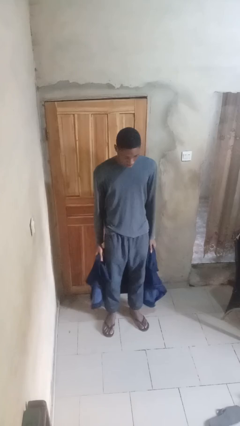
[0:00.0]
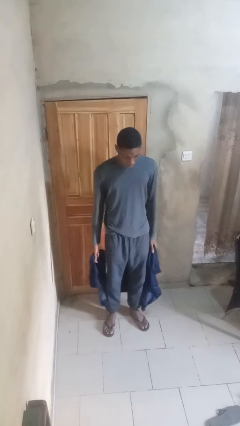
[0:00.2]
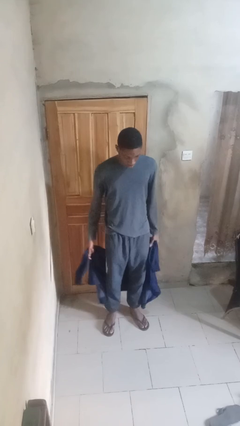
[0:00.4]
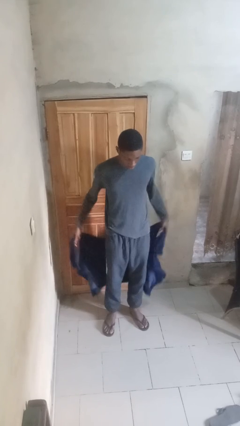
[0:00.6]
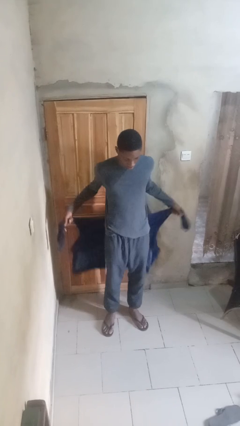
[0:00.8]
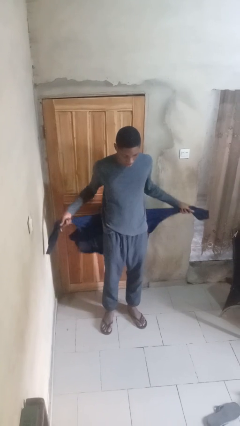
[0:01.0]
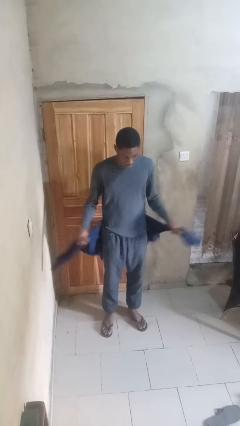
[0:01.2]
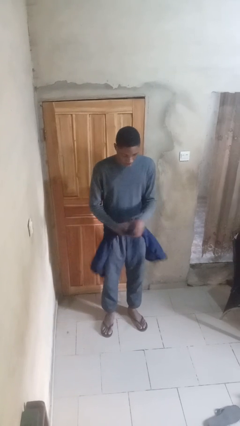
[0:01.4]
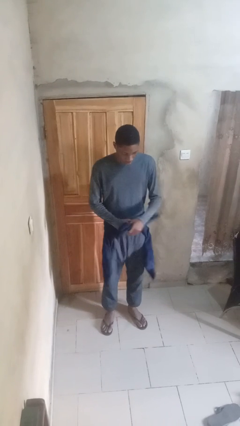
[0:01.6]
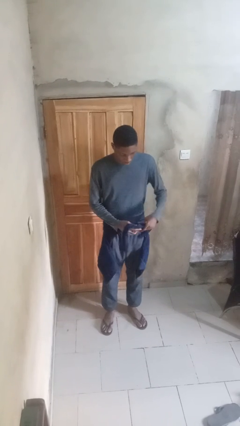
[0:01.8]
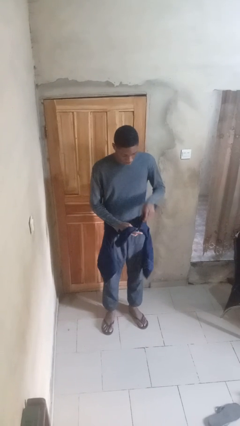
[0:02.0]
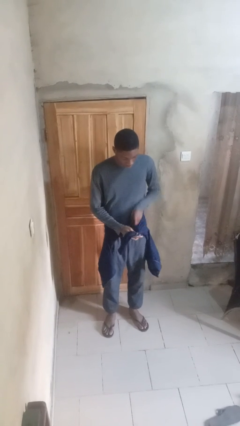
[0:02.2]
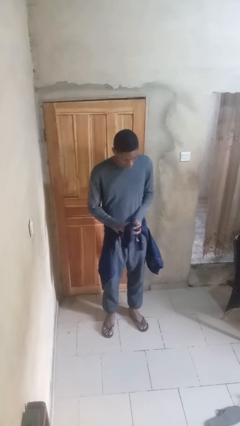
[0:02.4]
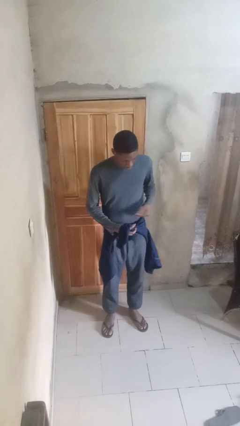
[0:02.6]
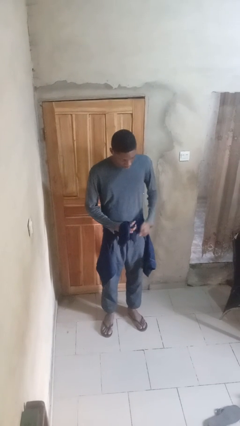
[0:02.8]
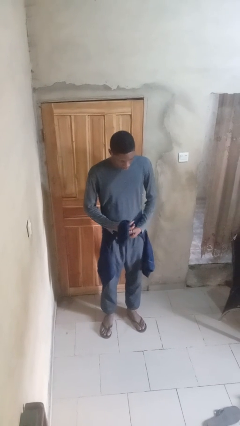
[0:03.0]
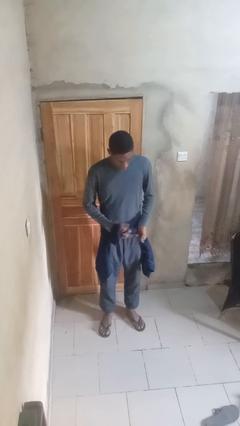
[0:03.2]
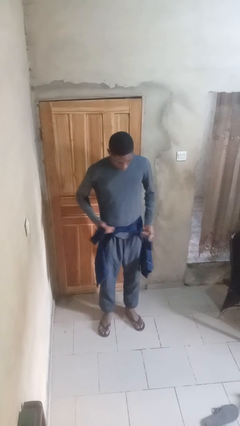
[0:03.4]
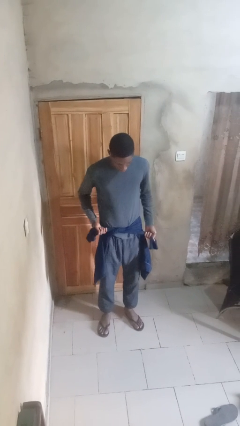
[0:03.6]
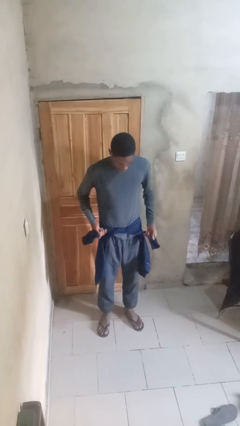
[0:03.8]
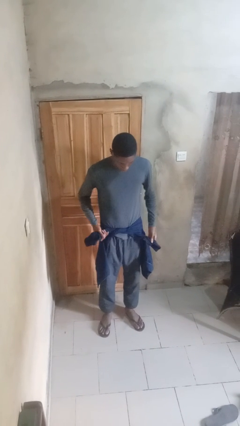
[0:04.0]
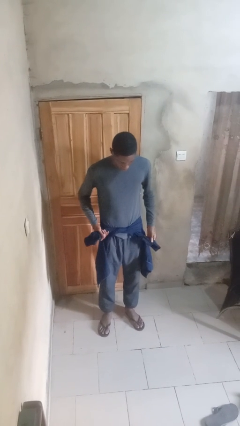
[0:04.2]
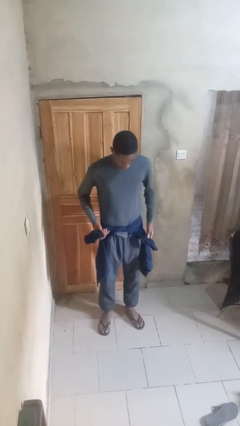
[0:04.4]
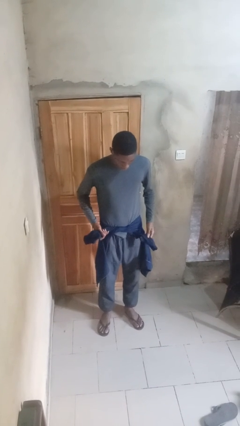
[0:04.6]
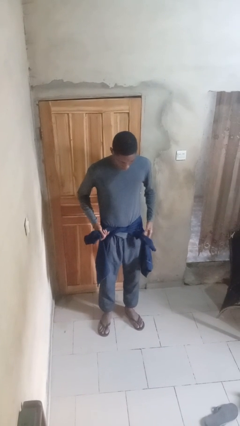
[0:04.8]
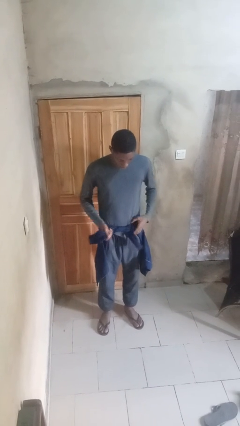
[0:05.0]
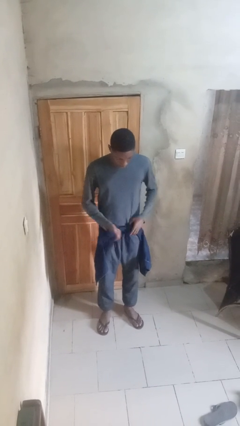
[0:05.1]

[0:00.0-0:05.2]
person ties jacket around waist

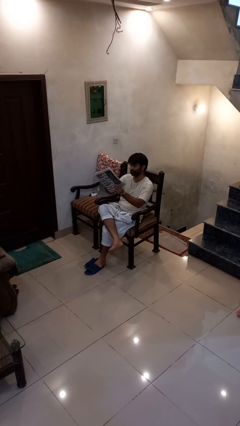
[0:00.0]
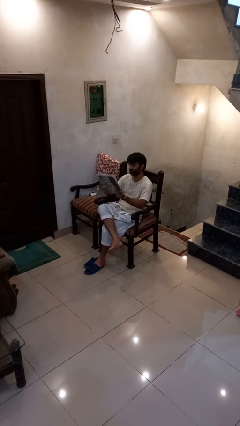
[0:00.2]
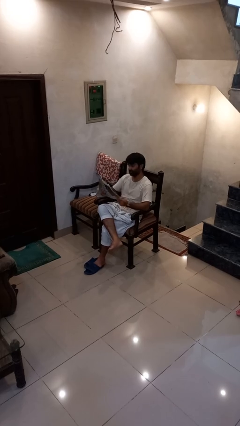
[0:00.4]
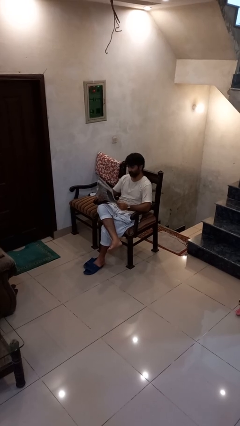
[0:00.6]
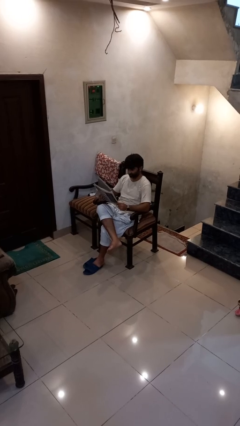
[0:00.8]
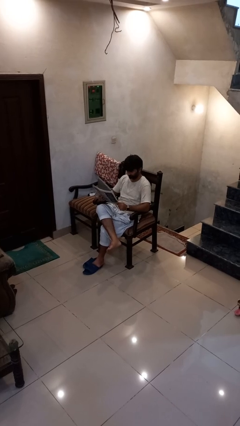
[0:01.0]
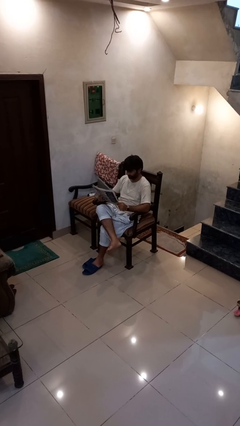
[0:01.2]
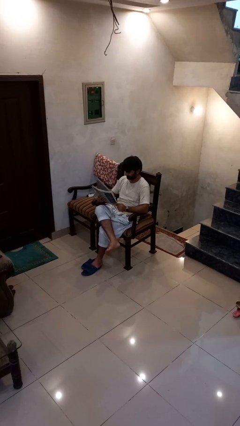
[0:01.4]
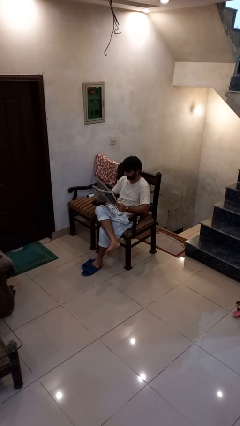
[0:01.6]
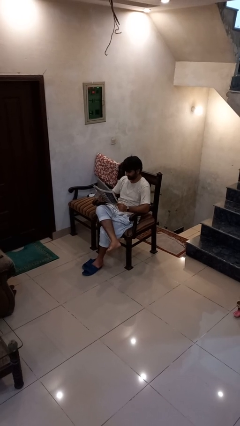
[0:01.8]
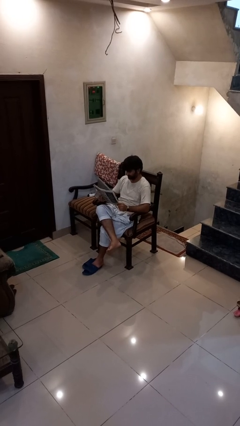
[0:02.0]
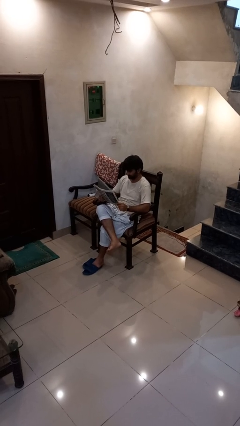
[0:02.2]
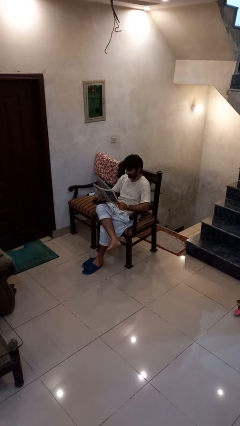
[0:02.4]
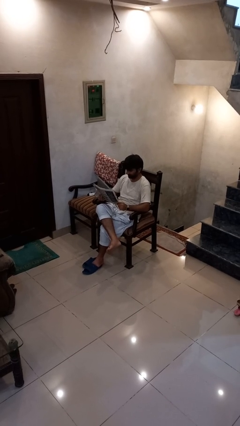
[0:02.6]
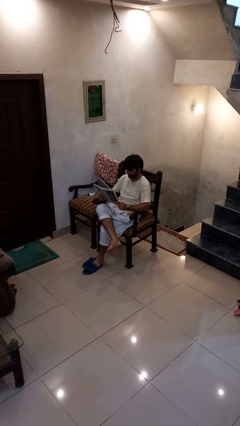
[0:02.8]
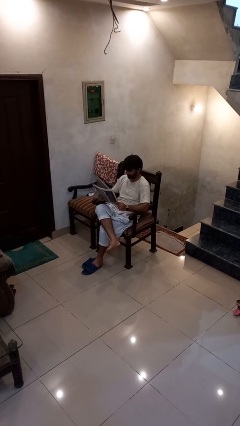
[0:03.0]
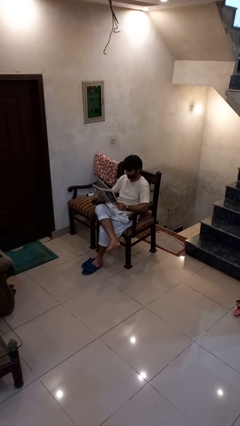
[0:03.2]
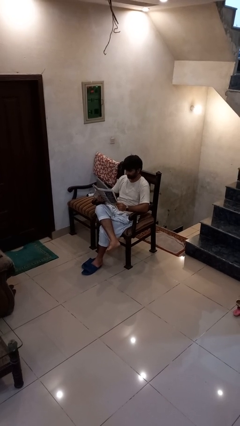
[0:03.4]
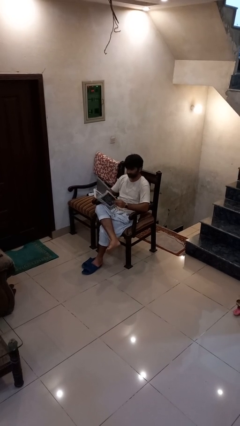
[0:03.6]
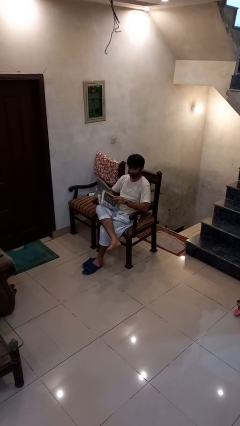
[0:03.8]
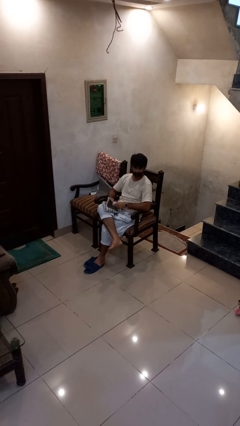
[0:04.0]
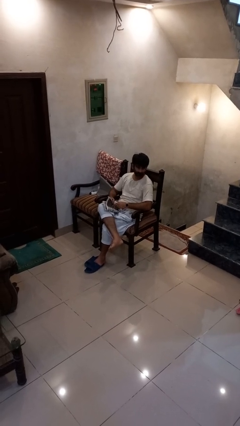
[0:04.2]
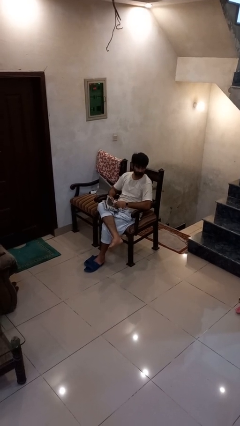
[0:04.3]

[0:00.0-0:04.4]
person reads newspaper

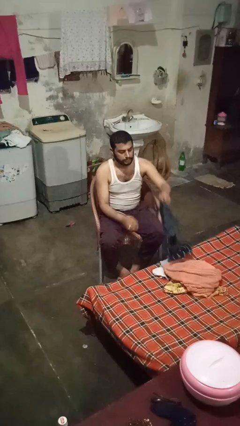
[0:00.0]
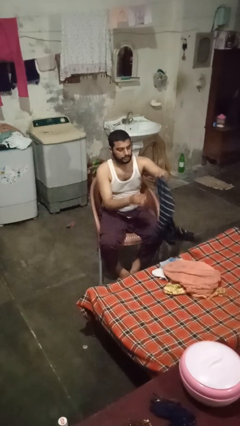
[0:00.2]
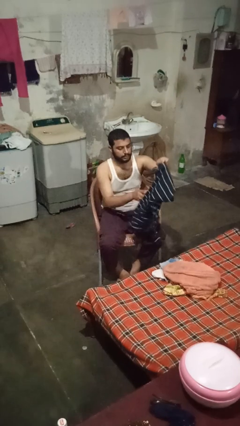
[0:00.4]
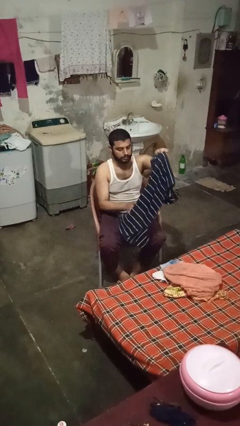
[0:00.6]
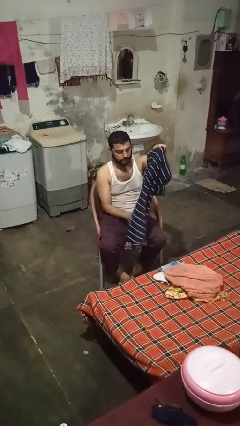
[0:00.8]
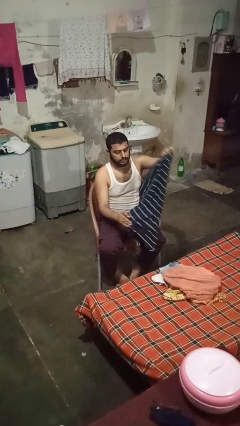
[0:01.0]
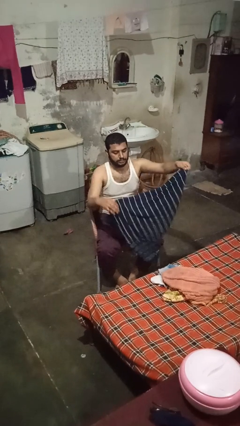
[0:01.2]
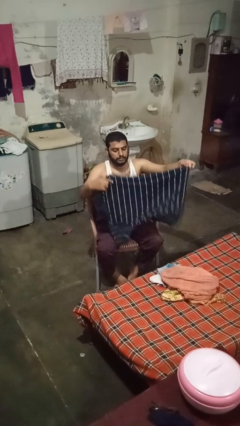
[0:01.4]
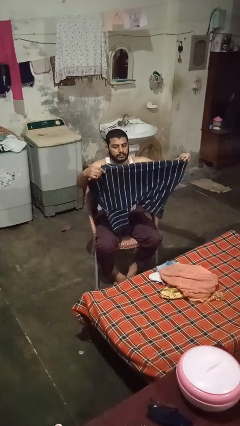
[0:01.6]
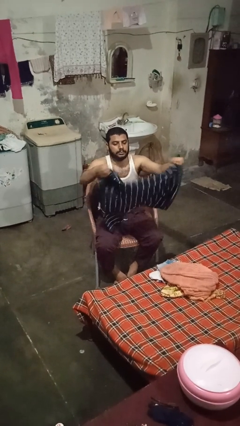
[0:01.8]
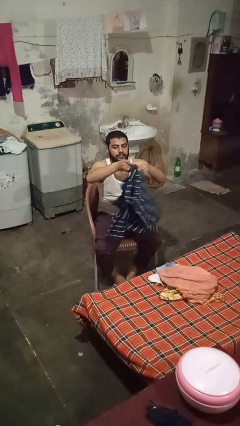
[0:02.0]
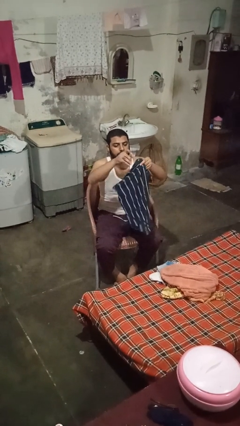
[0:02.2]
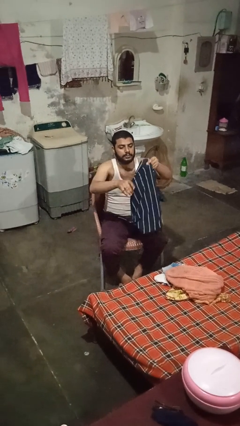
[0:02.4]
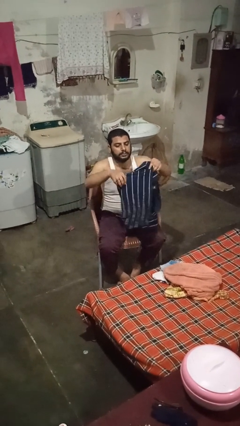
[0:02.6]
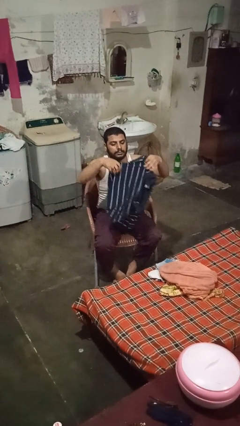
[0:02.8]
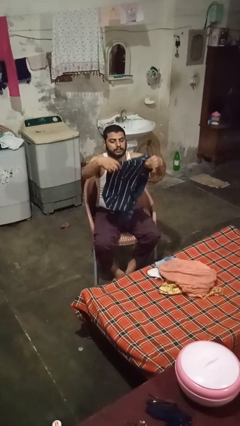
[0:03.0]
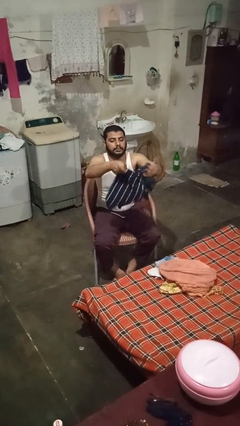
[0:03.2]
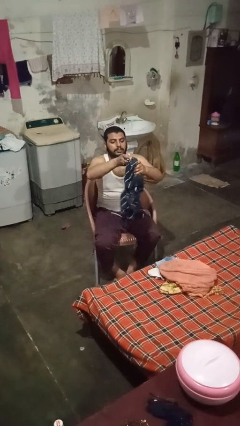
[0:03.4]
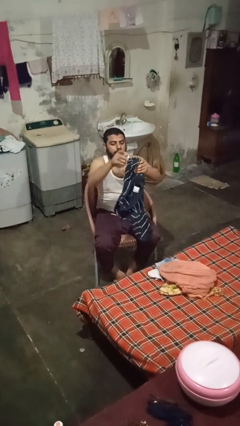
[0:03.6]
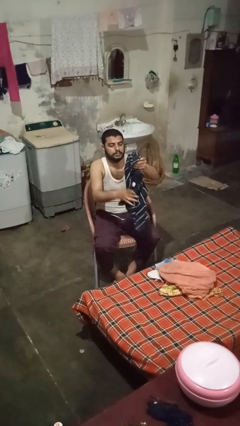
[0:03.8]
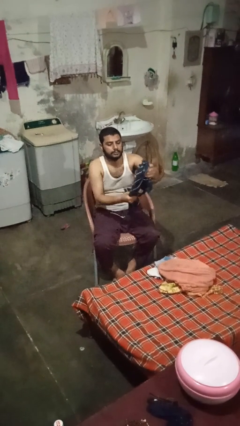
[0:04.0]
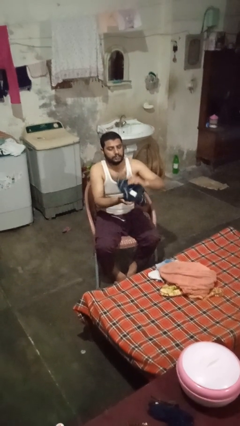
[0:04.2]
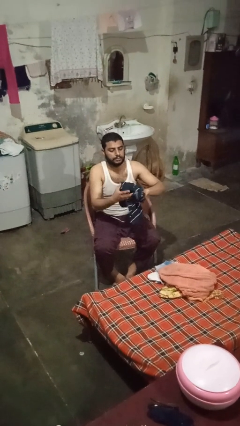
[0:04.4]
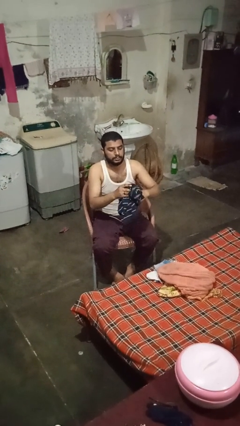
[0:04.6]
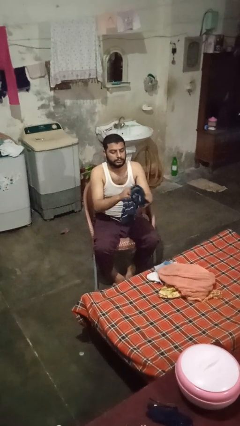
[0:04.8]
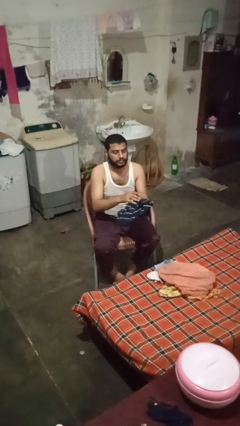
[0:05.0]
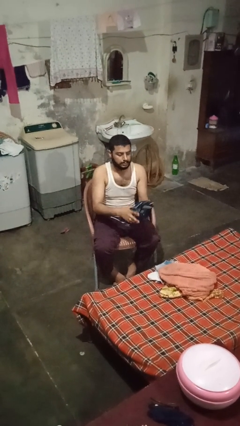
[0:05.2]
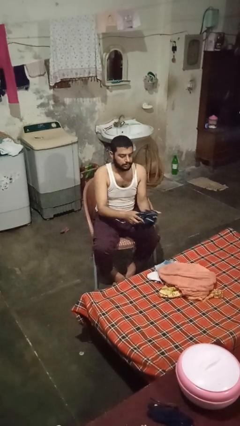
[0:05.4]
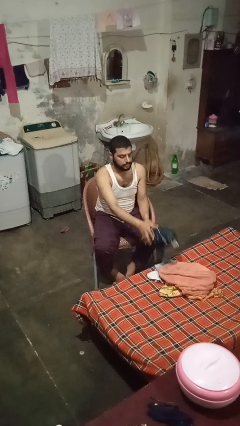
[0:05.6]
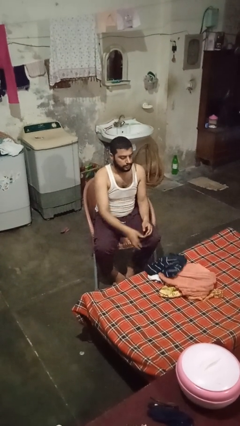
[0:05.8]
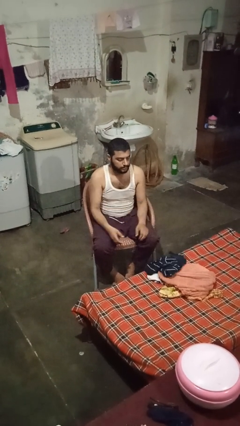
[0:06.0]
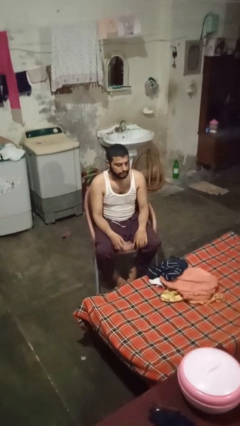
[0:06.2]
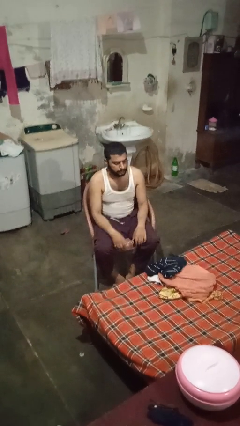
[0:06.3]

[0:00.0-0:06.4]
person folds shirt

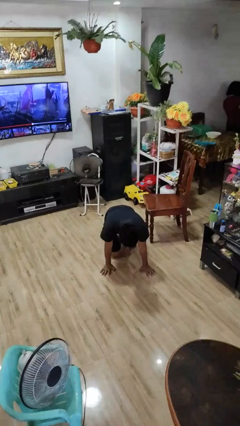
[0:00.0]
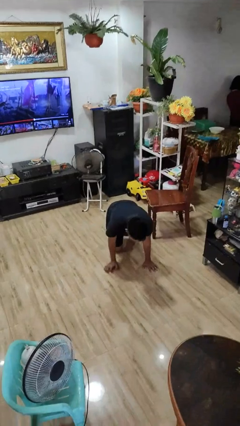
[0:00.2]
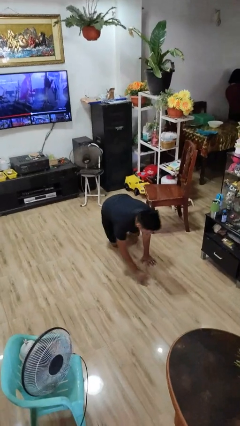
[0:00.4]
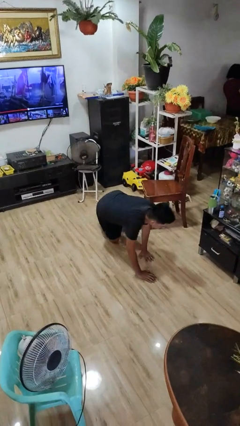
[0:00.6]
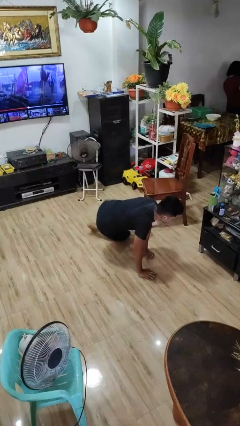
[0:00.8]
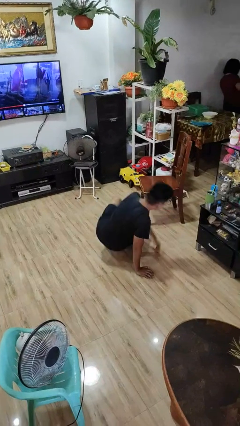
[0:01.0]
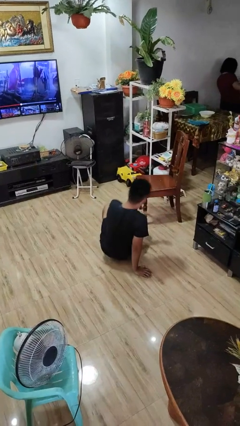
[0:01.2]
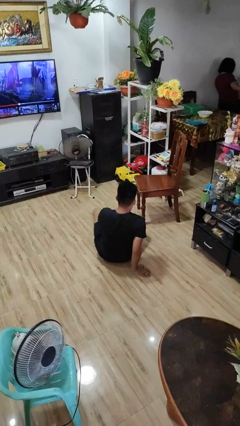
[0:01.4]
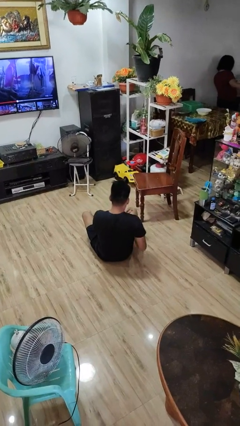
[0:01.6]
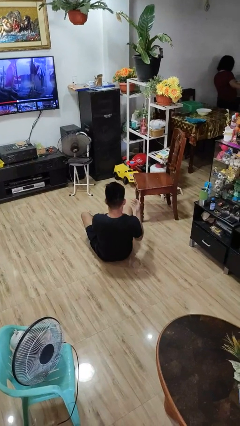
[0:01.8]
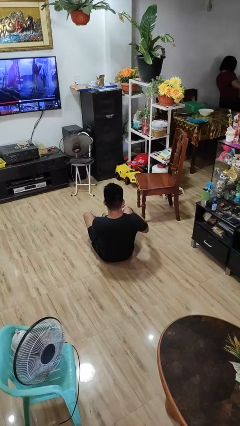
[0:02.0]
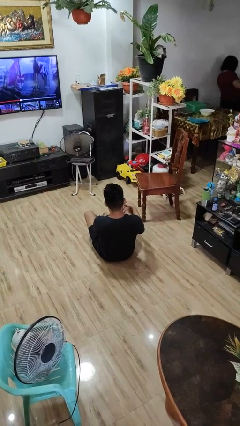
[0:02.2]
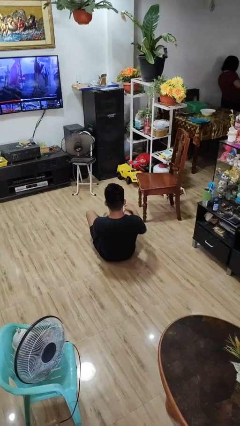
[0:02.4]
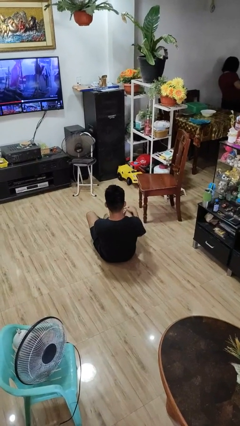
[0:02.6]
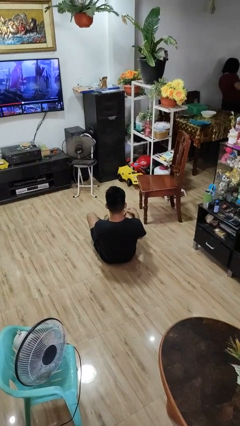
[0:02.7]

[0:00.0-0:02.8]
person lies down on floor
